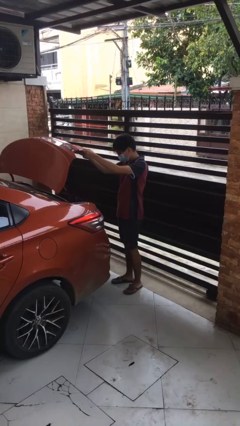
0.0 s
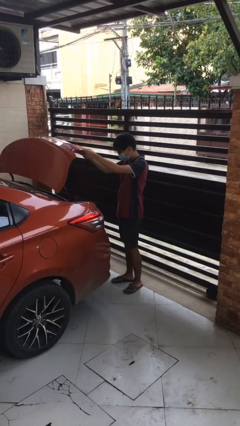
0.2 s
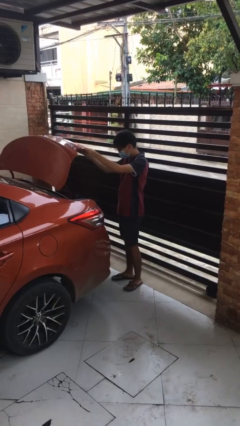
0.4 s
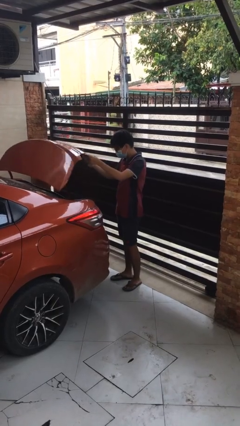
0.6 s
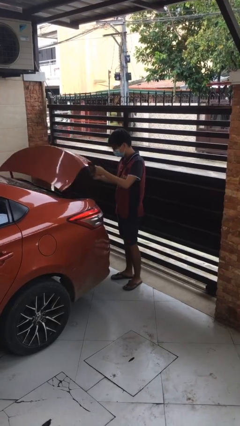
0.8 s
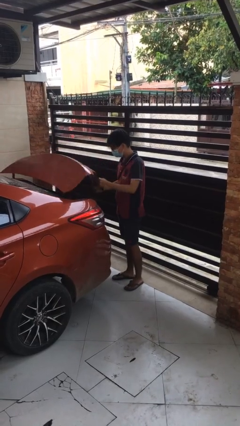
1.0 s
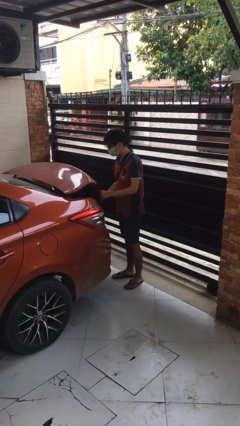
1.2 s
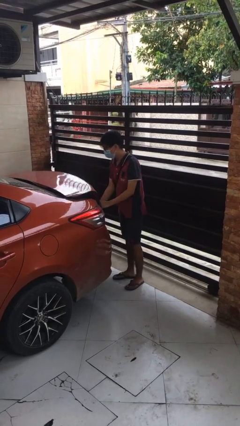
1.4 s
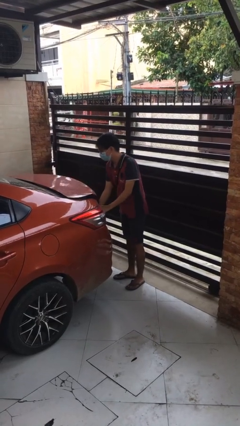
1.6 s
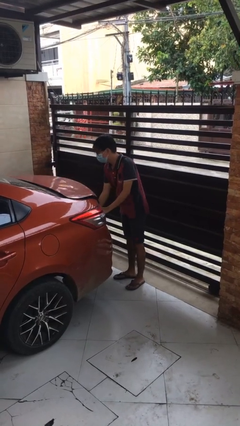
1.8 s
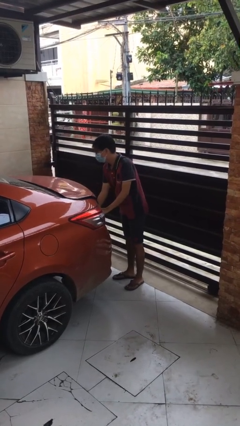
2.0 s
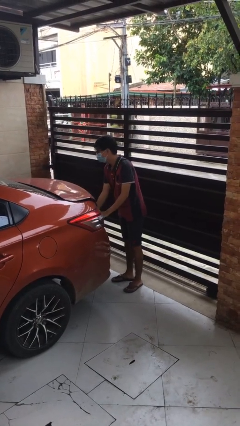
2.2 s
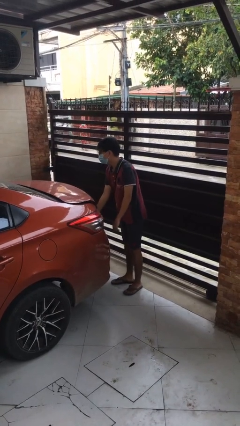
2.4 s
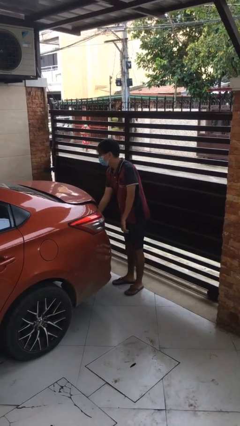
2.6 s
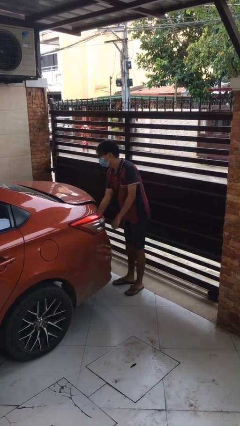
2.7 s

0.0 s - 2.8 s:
person closes car trunk

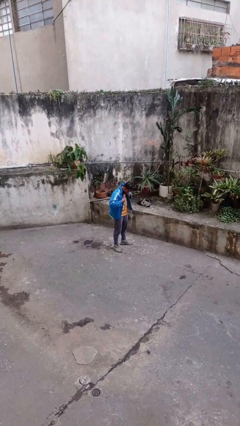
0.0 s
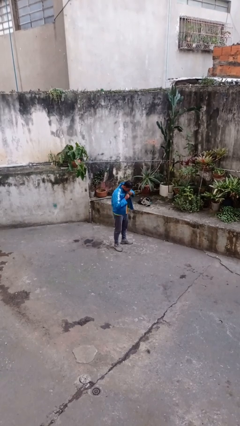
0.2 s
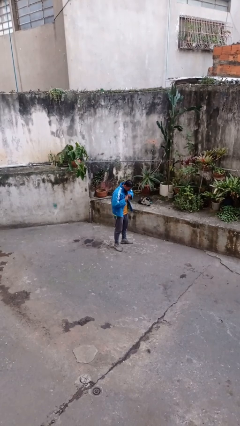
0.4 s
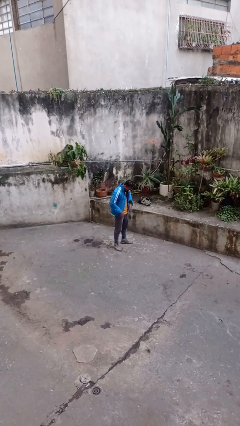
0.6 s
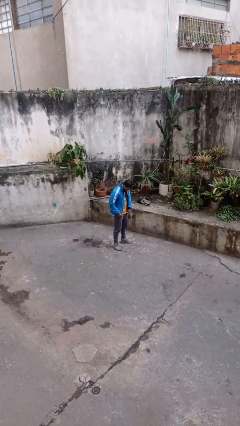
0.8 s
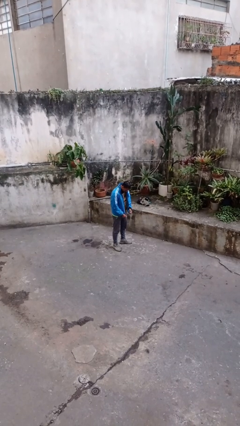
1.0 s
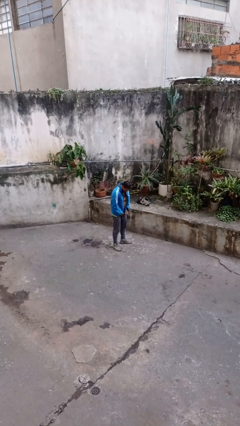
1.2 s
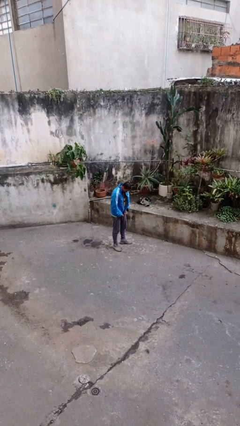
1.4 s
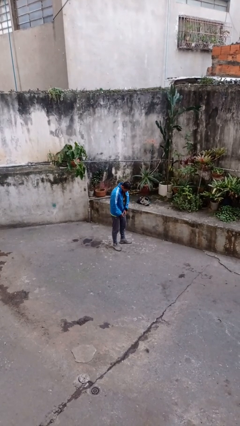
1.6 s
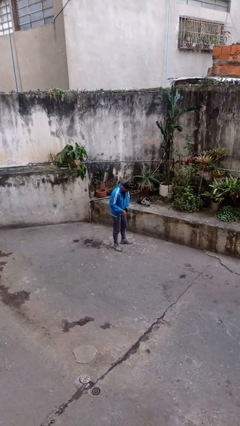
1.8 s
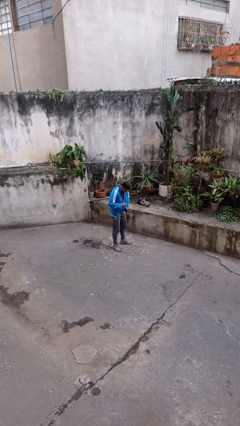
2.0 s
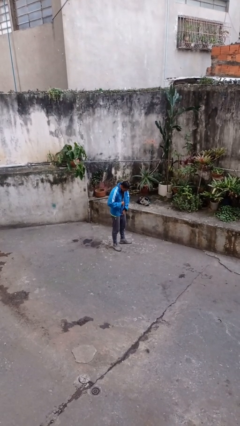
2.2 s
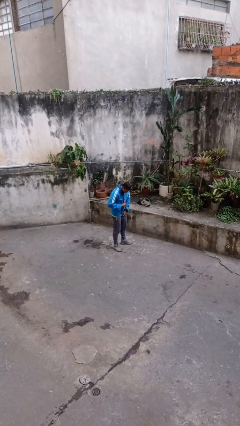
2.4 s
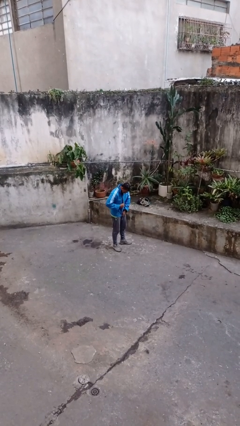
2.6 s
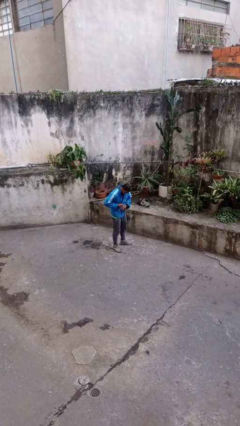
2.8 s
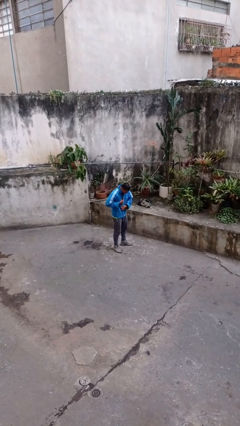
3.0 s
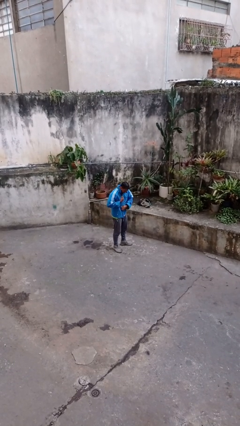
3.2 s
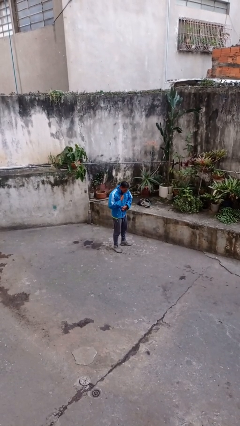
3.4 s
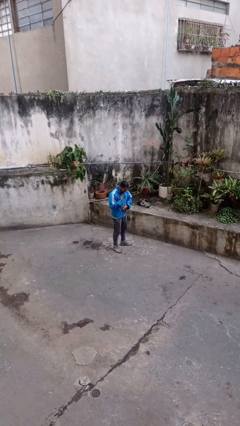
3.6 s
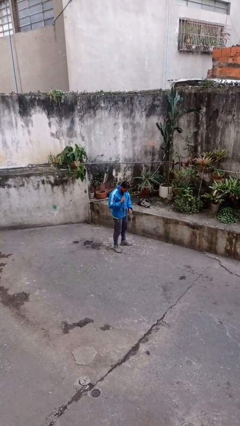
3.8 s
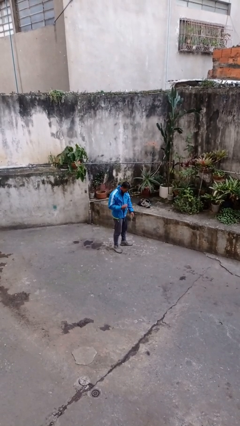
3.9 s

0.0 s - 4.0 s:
person zips up jacket

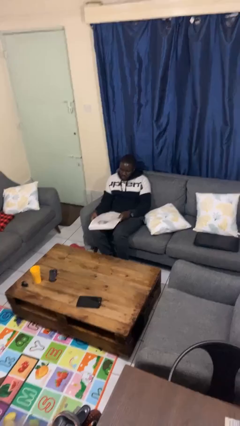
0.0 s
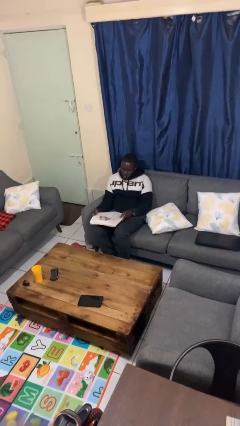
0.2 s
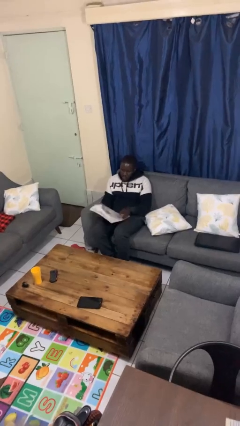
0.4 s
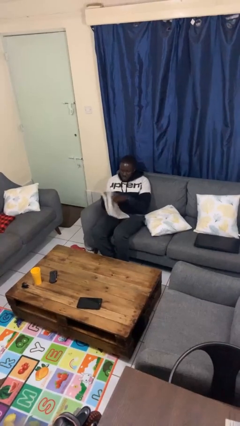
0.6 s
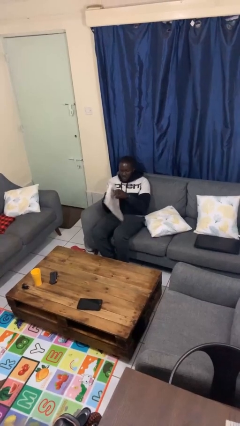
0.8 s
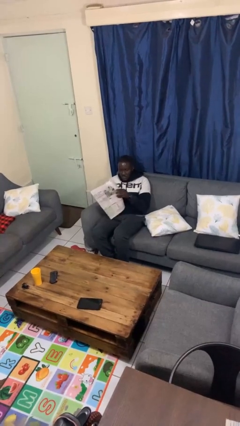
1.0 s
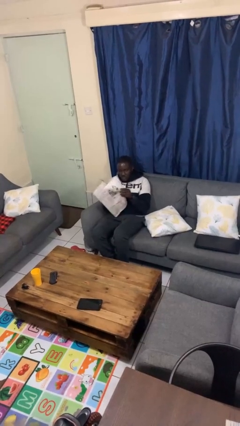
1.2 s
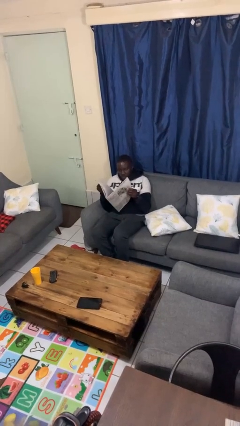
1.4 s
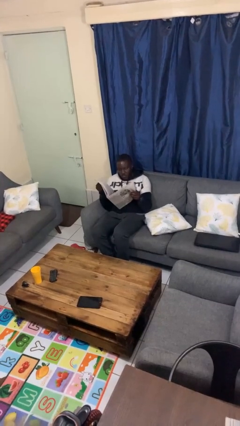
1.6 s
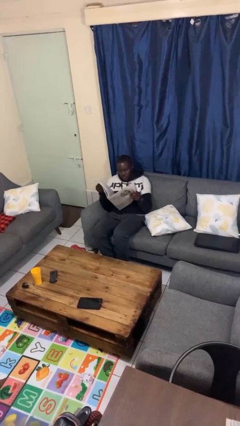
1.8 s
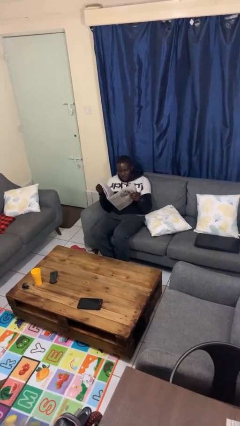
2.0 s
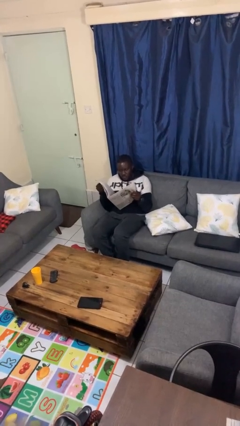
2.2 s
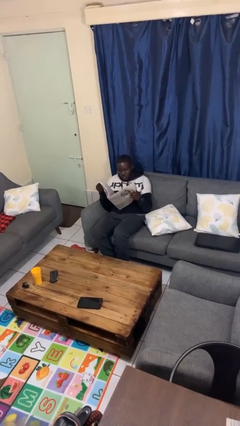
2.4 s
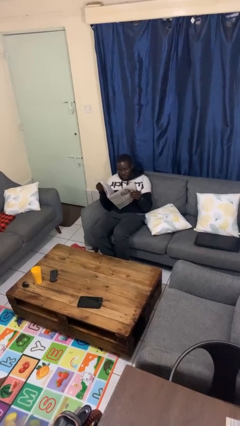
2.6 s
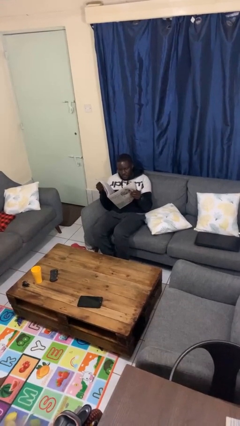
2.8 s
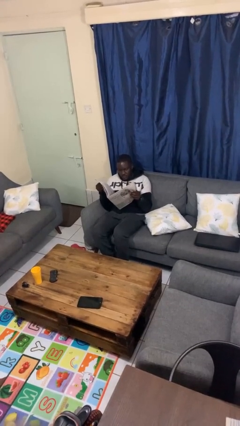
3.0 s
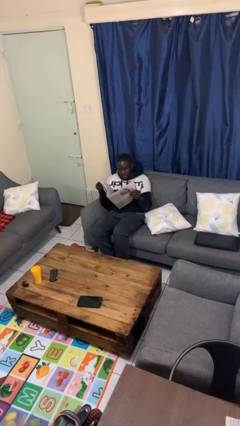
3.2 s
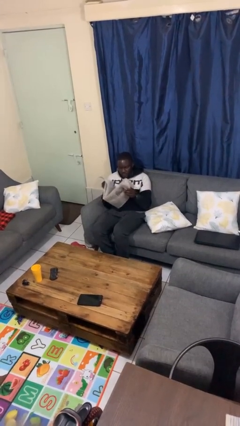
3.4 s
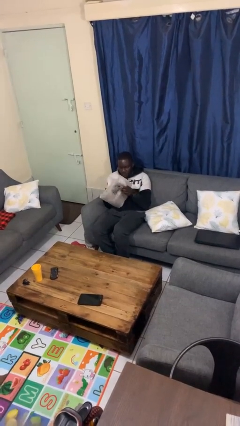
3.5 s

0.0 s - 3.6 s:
person reads newspaper

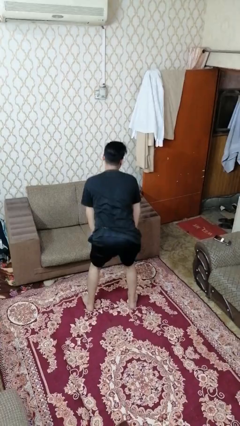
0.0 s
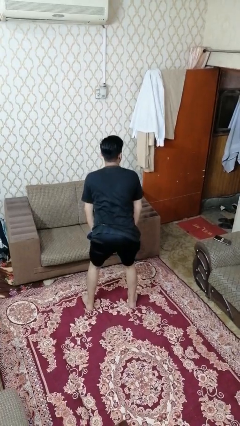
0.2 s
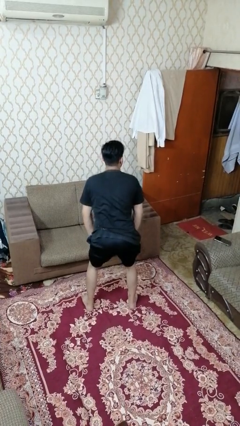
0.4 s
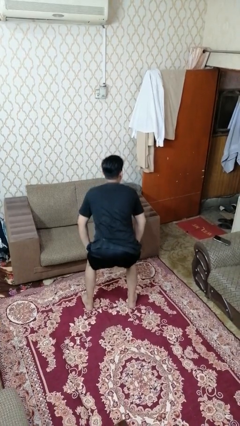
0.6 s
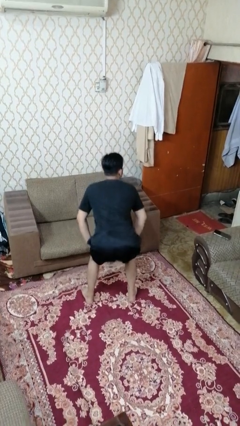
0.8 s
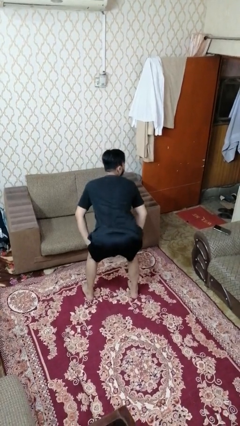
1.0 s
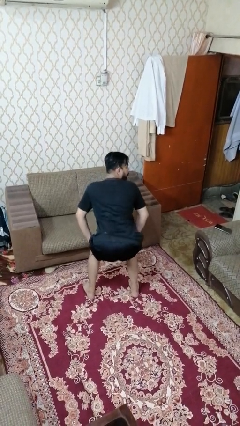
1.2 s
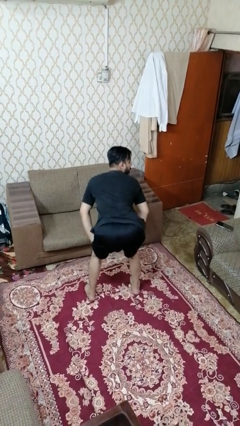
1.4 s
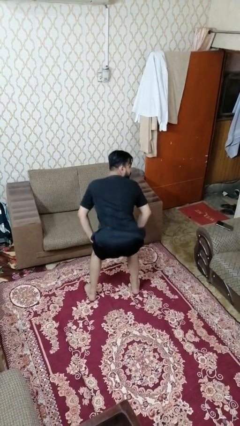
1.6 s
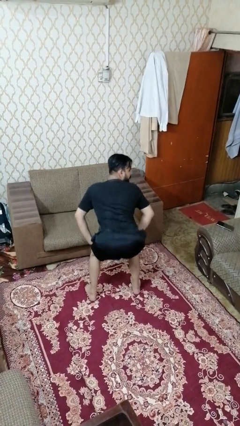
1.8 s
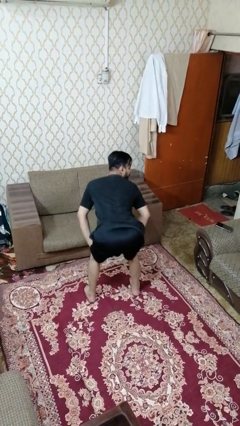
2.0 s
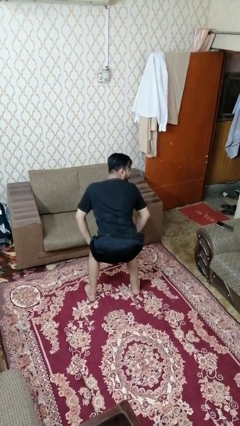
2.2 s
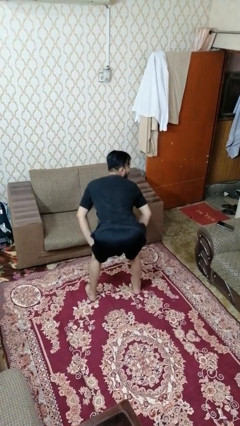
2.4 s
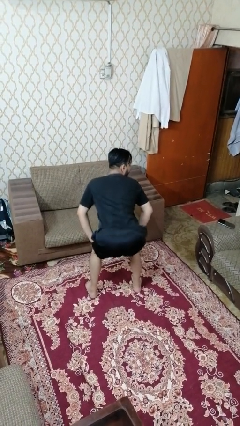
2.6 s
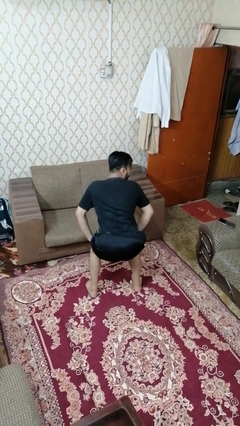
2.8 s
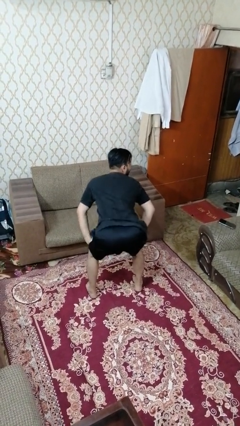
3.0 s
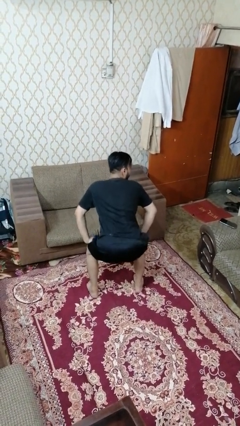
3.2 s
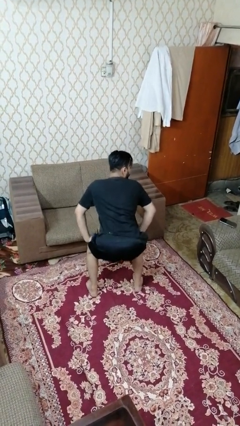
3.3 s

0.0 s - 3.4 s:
person dances in place

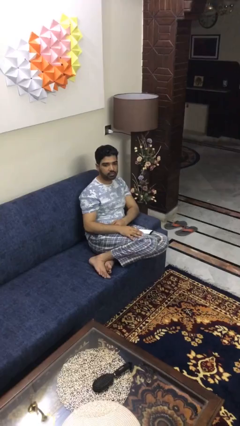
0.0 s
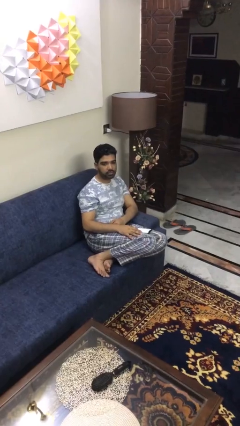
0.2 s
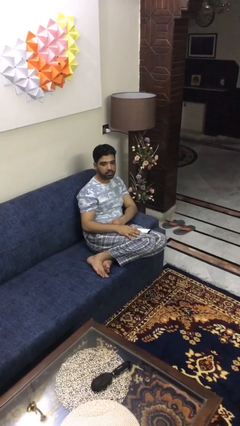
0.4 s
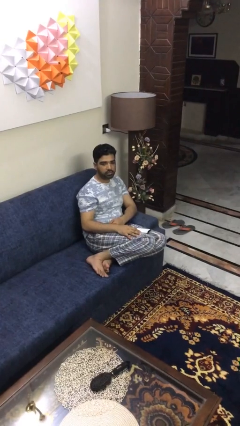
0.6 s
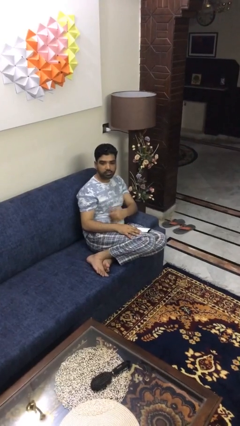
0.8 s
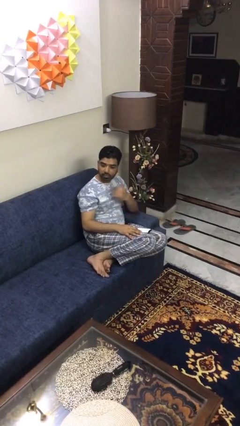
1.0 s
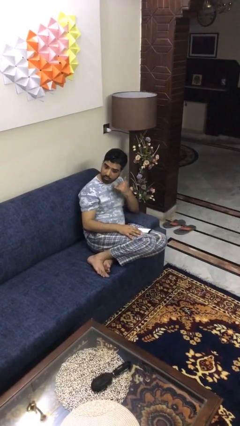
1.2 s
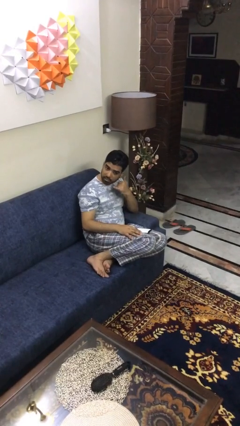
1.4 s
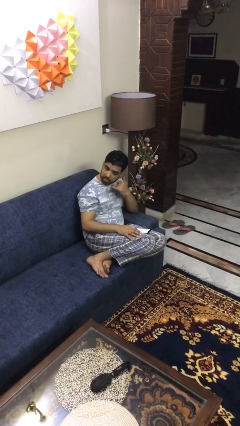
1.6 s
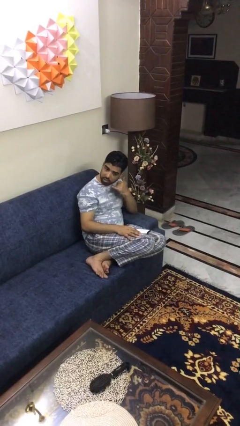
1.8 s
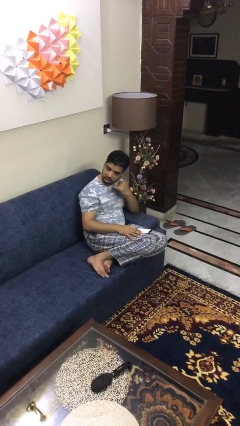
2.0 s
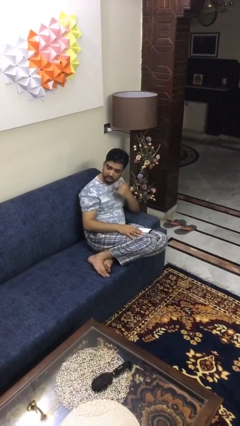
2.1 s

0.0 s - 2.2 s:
person gestures call me

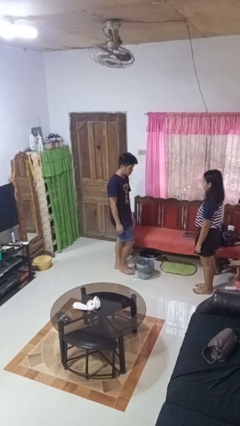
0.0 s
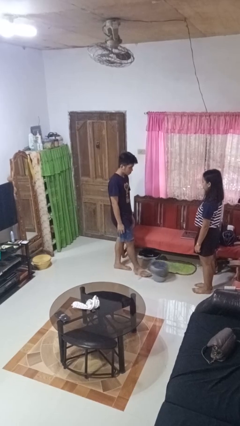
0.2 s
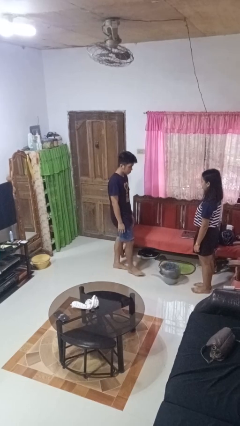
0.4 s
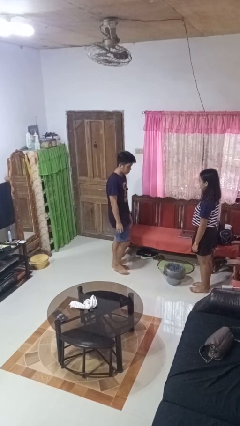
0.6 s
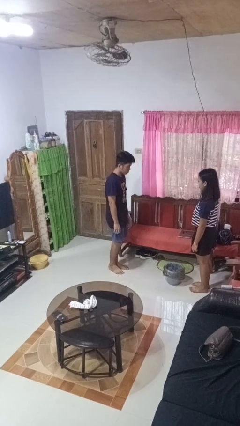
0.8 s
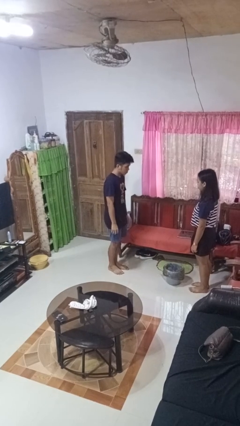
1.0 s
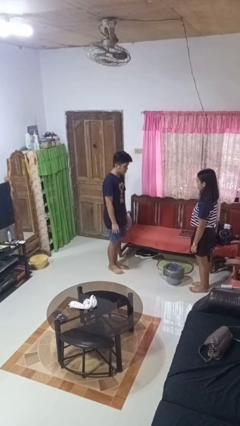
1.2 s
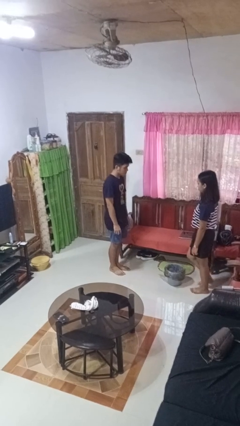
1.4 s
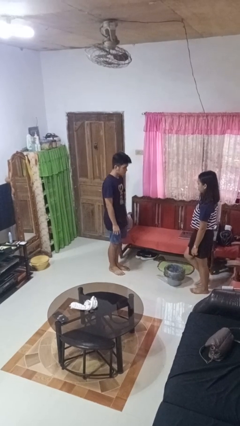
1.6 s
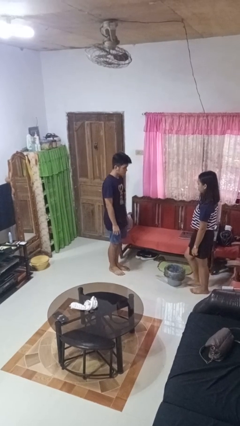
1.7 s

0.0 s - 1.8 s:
person kicks object to person
